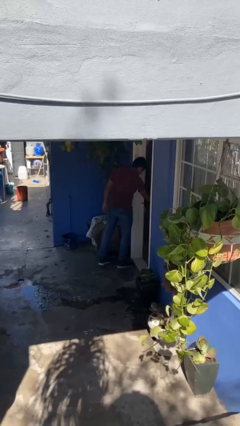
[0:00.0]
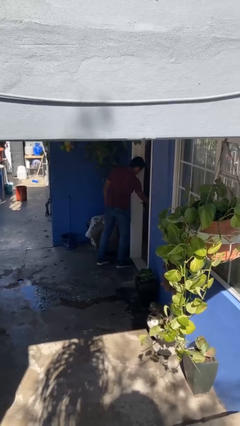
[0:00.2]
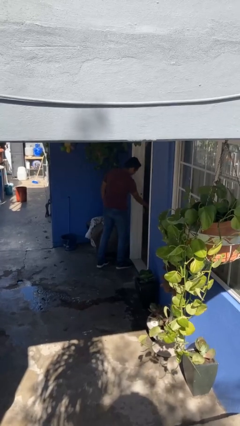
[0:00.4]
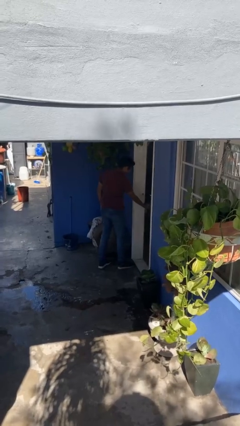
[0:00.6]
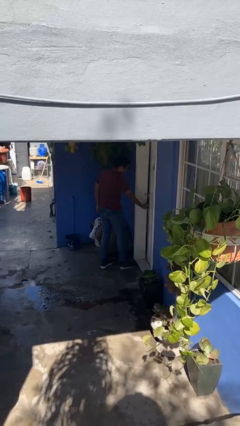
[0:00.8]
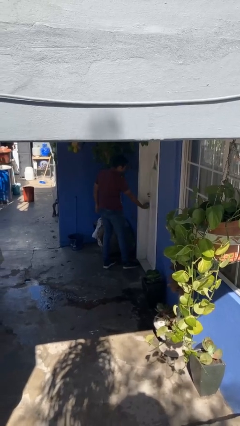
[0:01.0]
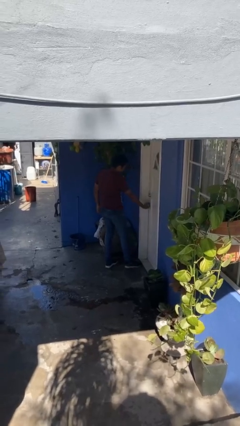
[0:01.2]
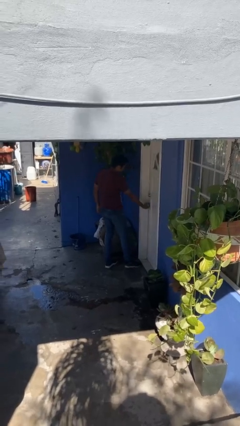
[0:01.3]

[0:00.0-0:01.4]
person closes facility door

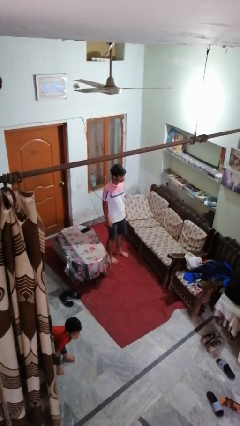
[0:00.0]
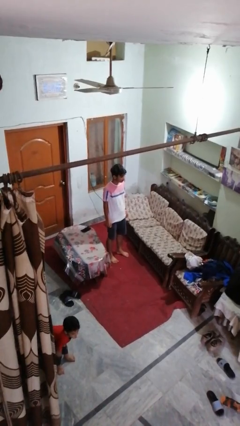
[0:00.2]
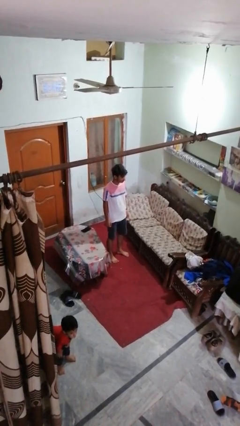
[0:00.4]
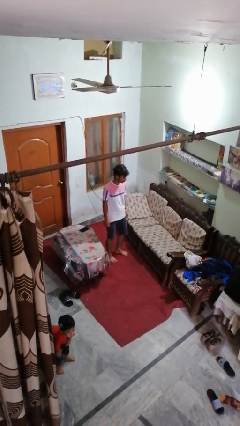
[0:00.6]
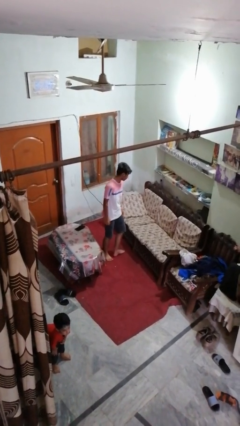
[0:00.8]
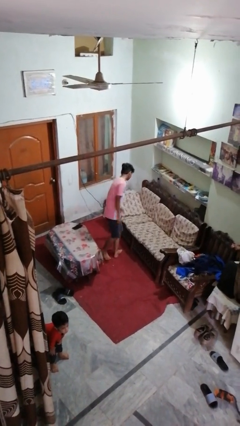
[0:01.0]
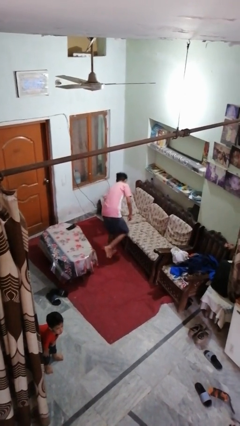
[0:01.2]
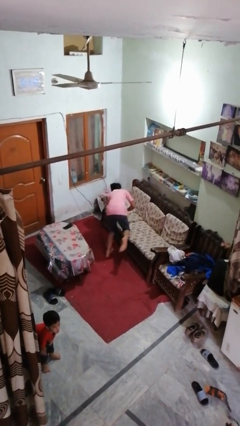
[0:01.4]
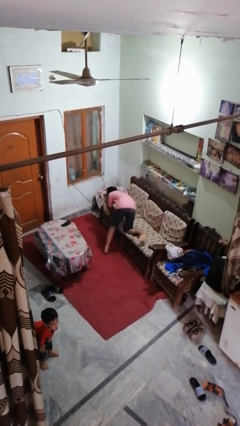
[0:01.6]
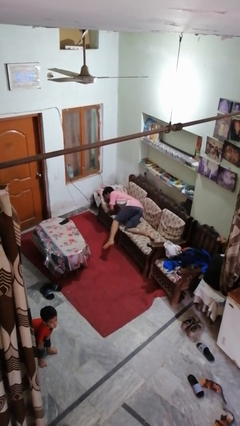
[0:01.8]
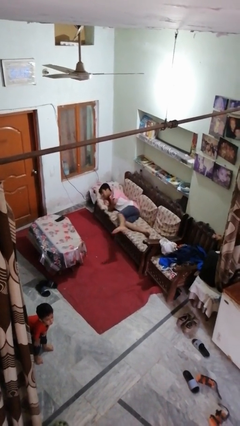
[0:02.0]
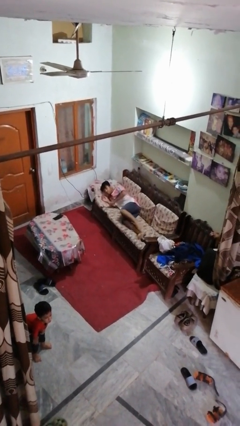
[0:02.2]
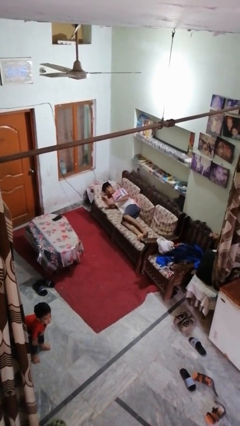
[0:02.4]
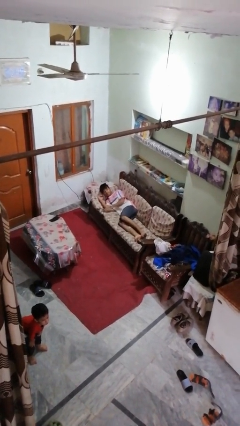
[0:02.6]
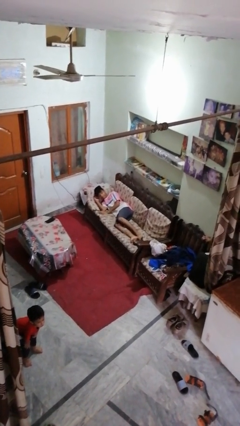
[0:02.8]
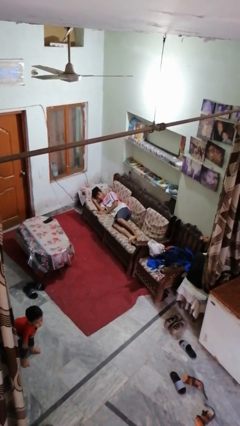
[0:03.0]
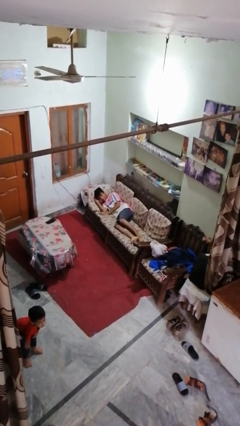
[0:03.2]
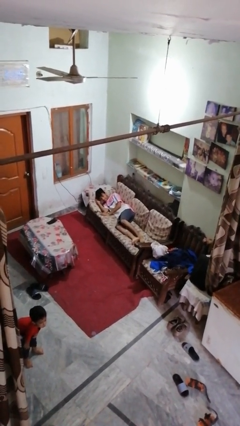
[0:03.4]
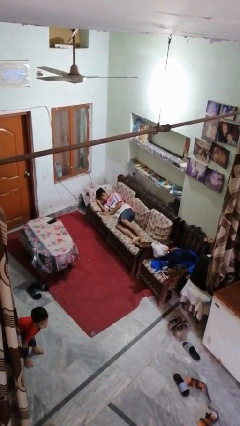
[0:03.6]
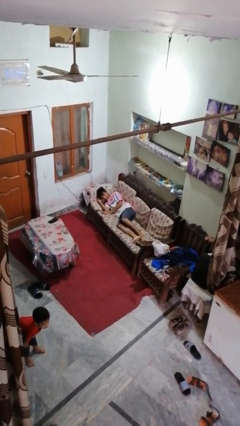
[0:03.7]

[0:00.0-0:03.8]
person lies down on couch

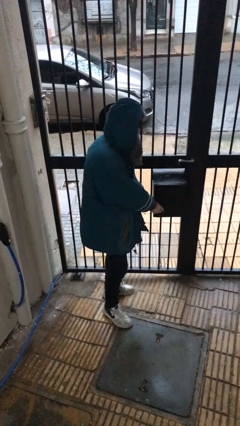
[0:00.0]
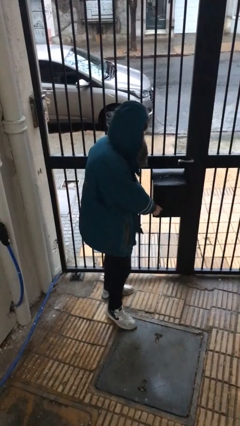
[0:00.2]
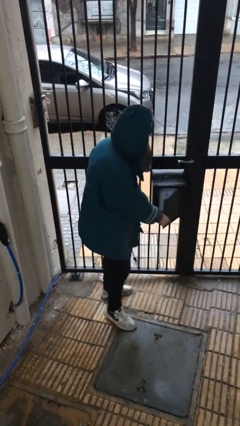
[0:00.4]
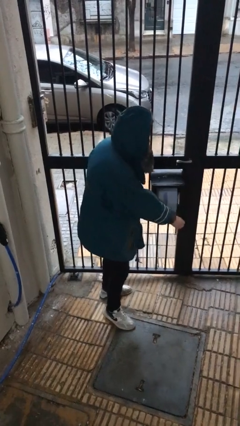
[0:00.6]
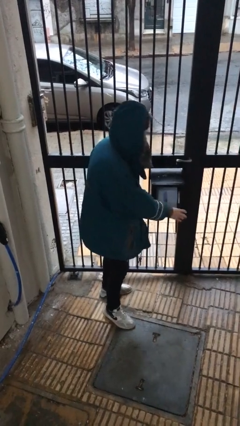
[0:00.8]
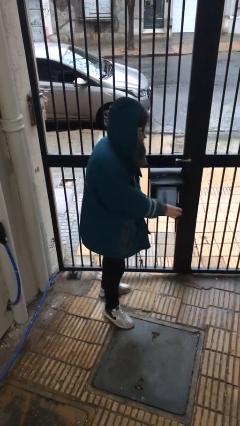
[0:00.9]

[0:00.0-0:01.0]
person opens mailbox

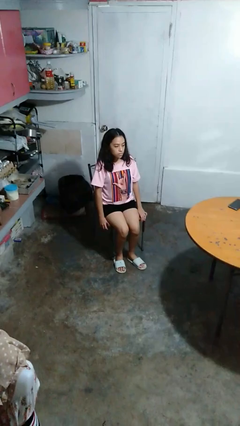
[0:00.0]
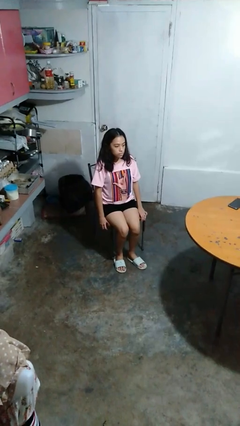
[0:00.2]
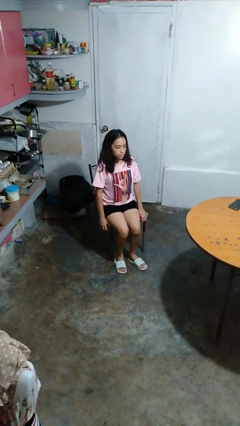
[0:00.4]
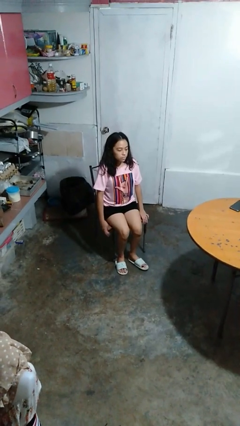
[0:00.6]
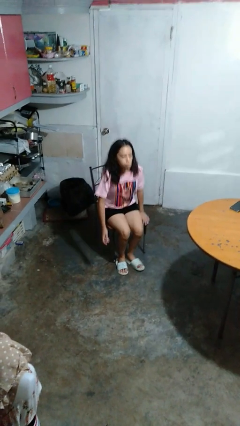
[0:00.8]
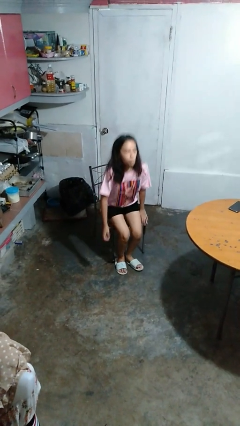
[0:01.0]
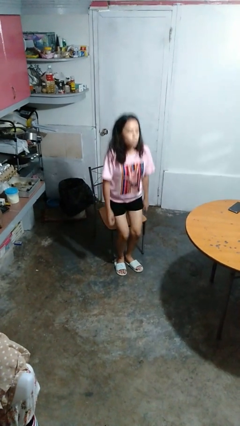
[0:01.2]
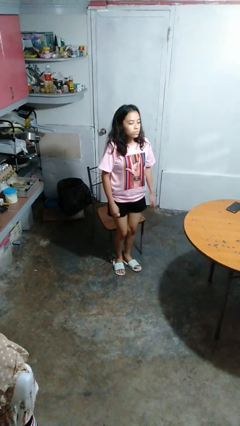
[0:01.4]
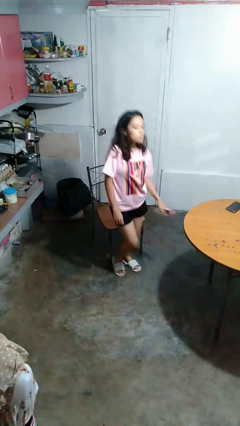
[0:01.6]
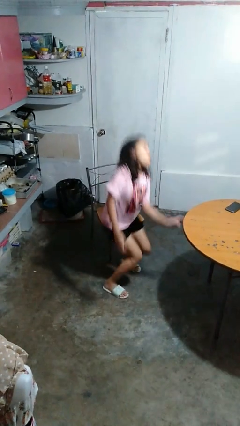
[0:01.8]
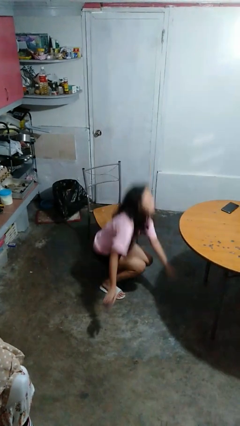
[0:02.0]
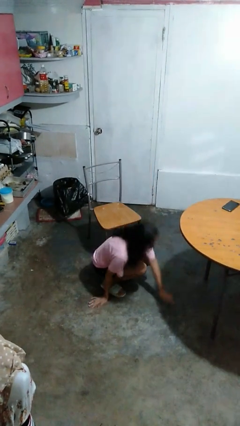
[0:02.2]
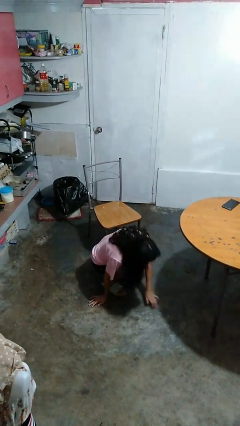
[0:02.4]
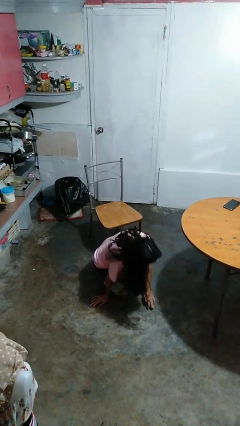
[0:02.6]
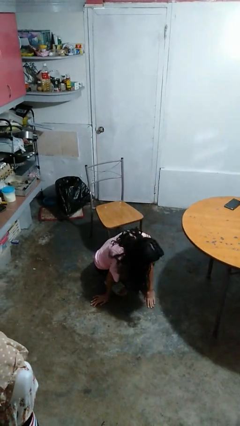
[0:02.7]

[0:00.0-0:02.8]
person falls from chair

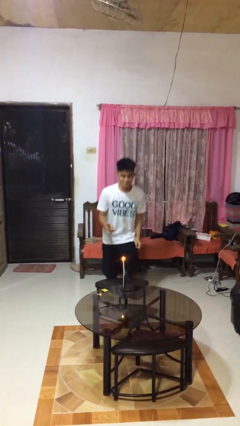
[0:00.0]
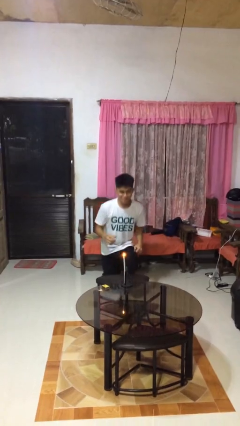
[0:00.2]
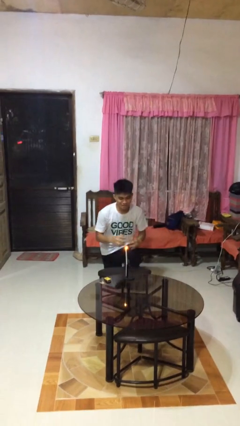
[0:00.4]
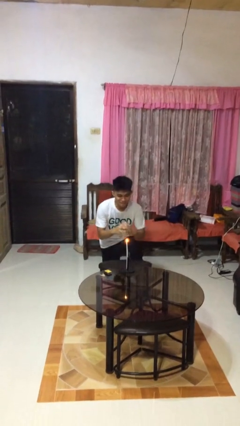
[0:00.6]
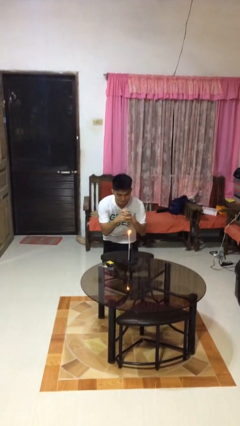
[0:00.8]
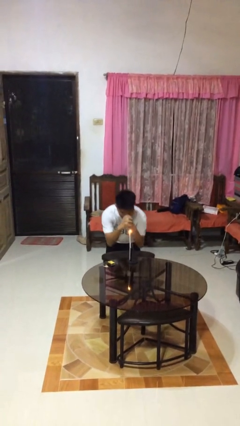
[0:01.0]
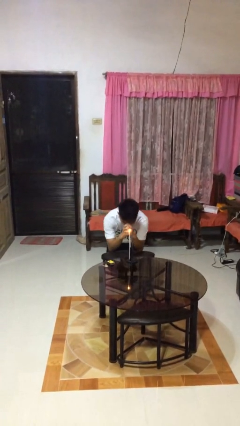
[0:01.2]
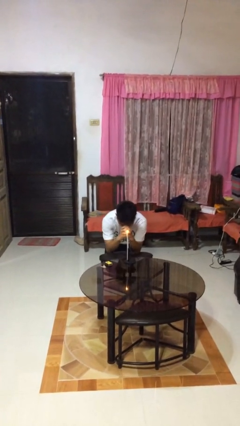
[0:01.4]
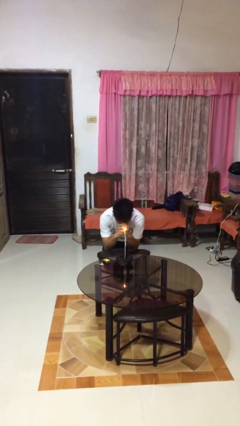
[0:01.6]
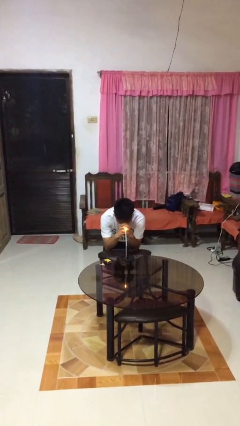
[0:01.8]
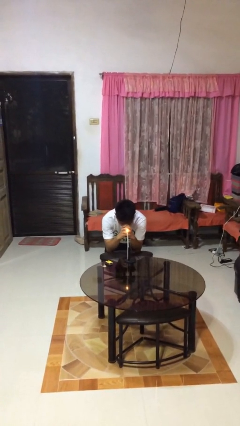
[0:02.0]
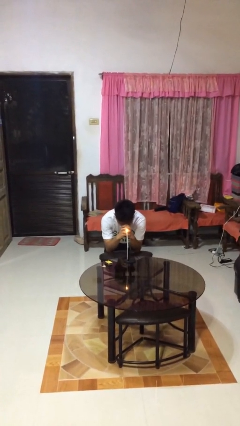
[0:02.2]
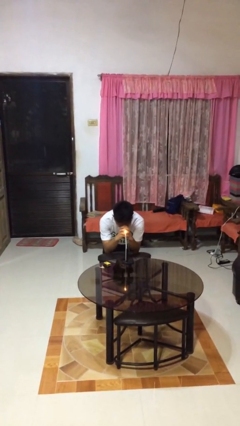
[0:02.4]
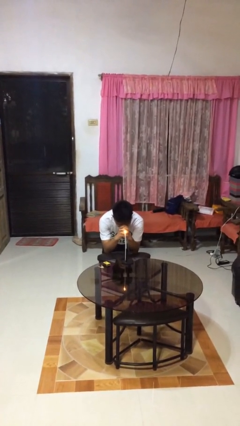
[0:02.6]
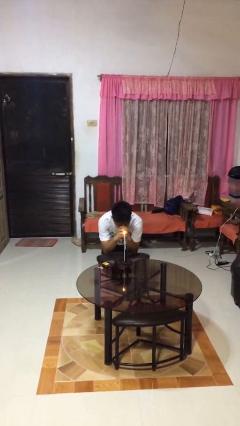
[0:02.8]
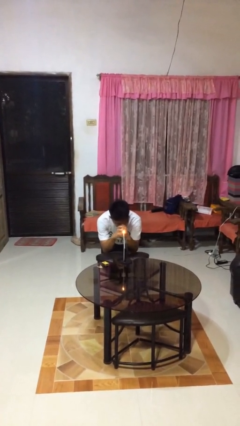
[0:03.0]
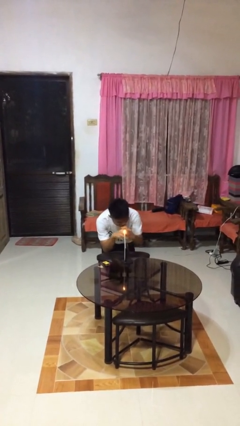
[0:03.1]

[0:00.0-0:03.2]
person prays

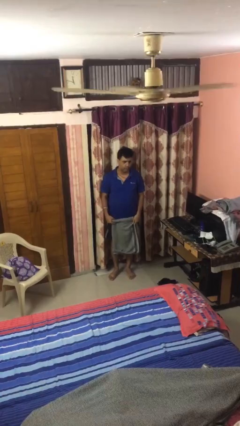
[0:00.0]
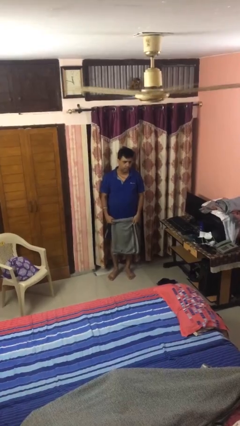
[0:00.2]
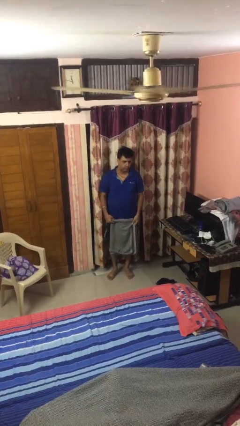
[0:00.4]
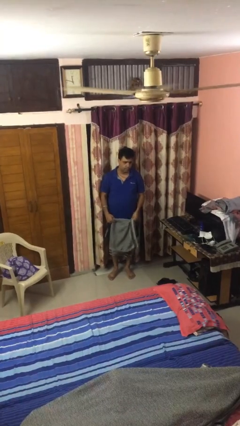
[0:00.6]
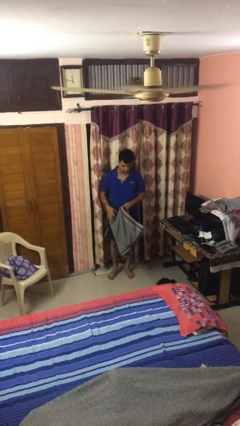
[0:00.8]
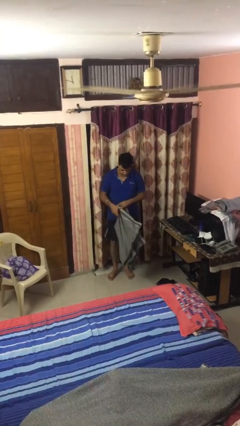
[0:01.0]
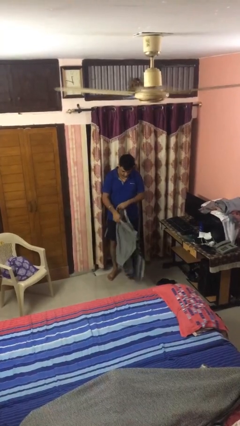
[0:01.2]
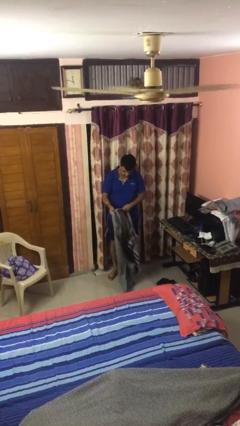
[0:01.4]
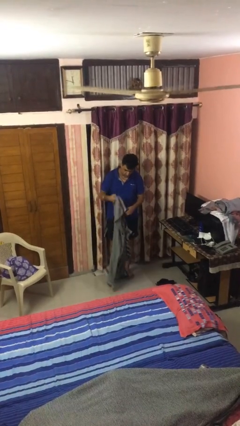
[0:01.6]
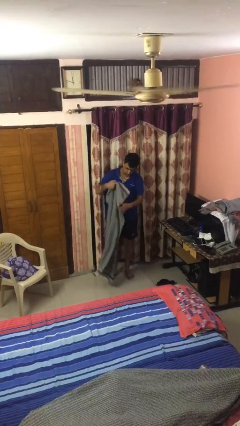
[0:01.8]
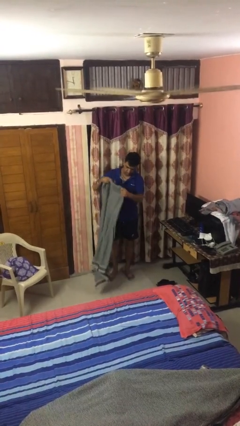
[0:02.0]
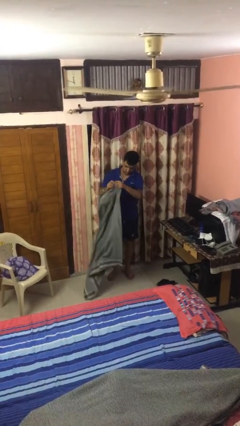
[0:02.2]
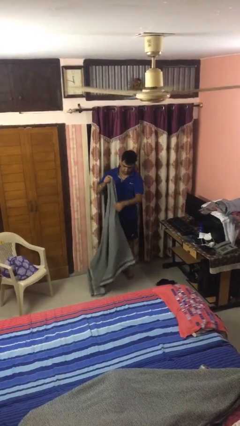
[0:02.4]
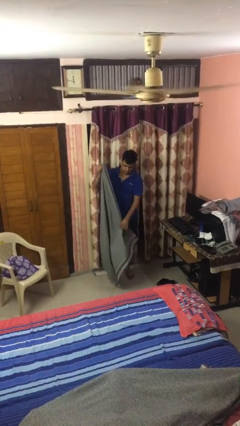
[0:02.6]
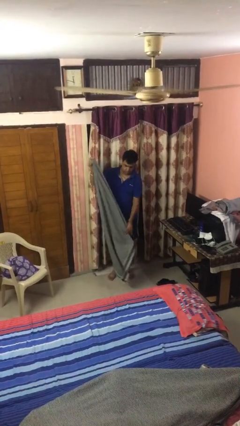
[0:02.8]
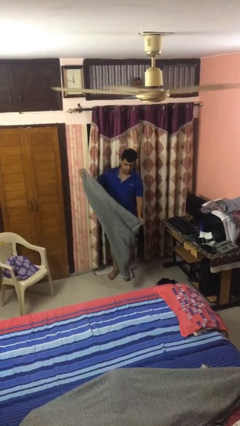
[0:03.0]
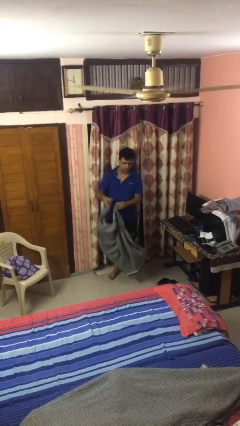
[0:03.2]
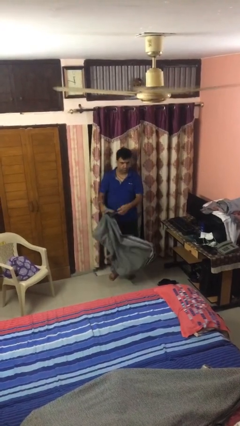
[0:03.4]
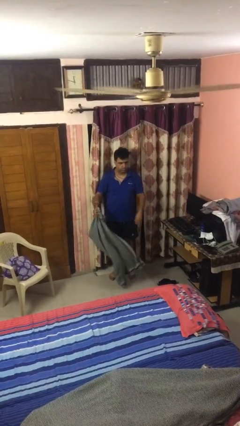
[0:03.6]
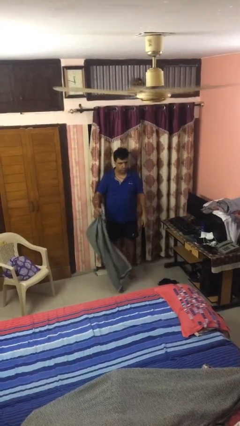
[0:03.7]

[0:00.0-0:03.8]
person unfolds blanket

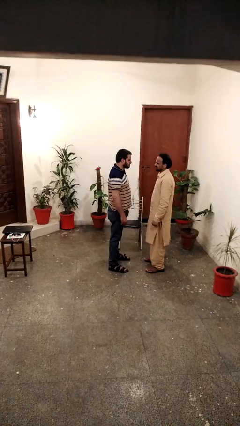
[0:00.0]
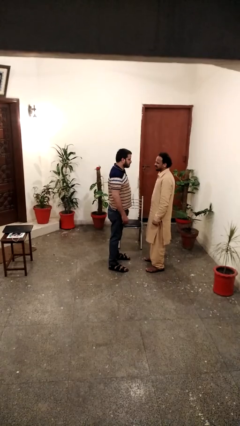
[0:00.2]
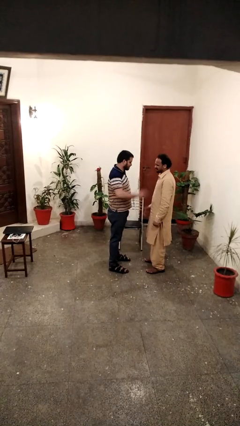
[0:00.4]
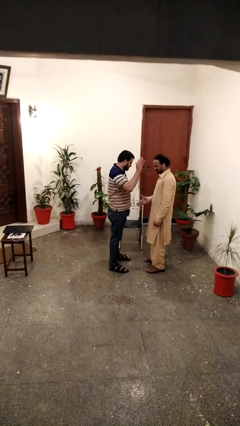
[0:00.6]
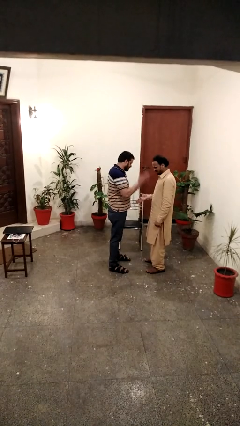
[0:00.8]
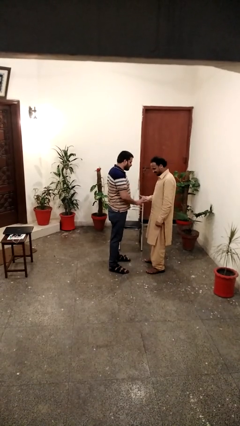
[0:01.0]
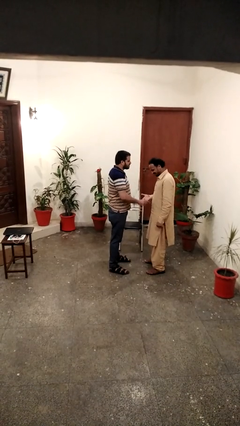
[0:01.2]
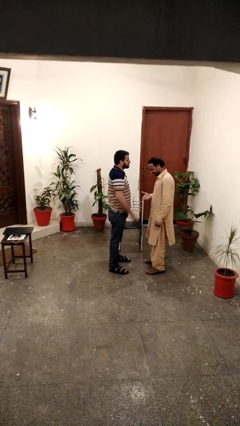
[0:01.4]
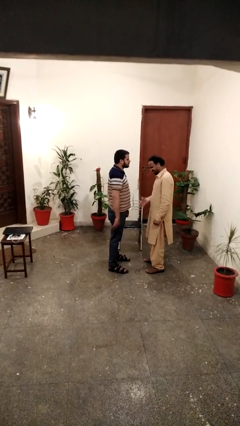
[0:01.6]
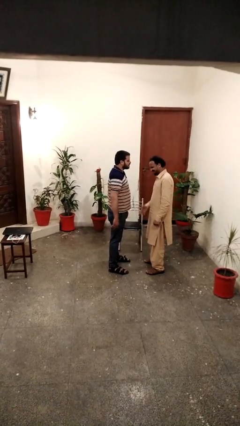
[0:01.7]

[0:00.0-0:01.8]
person highfives hand
